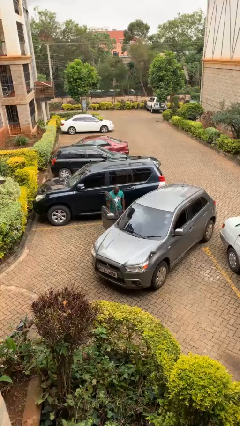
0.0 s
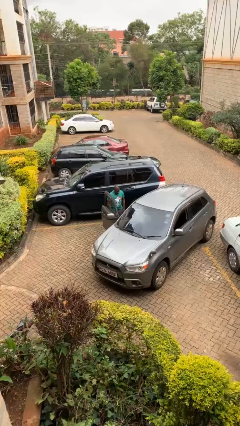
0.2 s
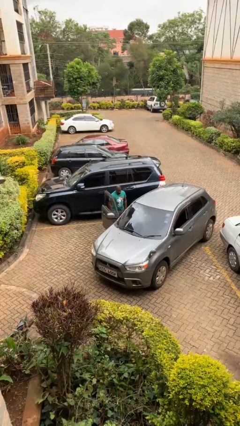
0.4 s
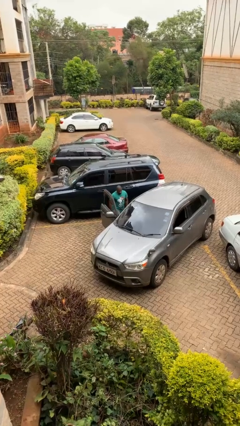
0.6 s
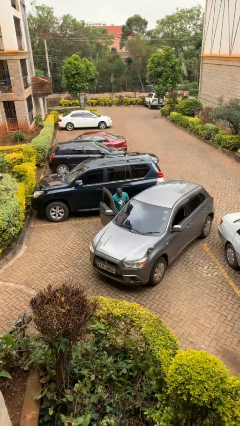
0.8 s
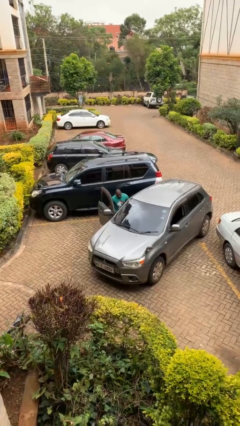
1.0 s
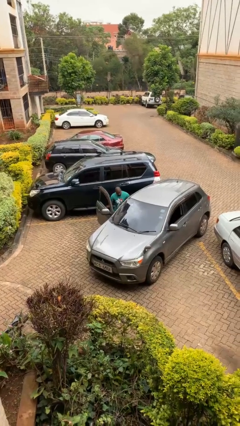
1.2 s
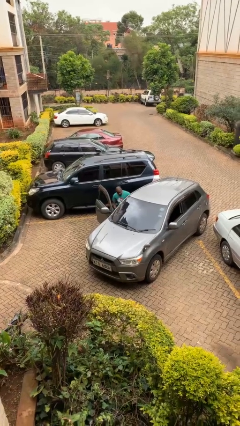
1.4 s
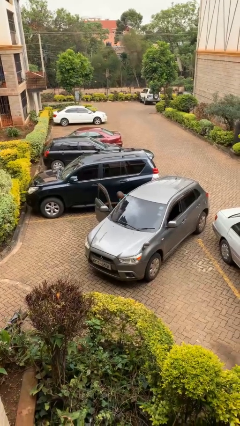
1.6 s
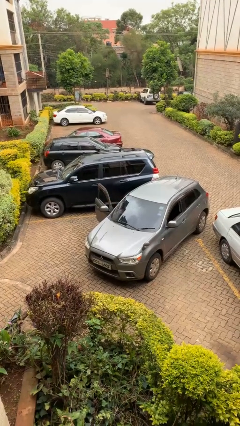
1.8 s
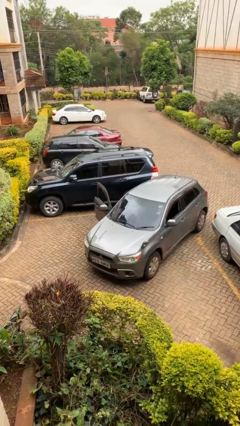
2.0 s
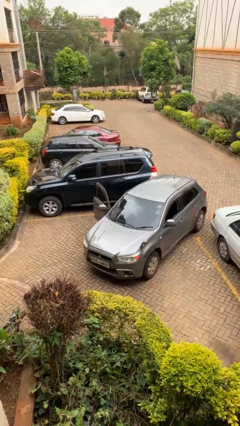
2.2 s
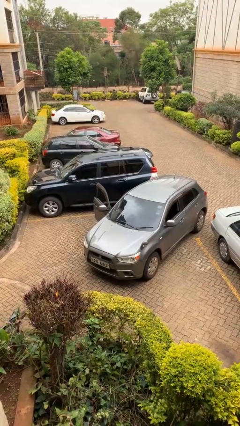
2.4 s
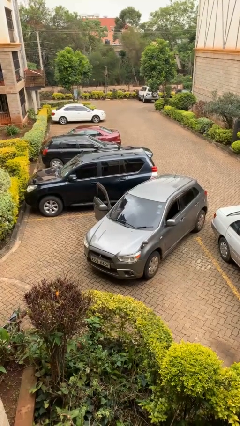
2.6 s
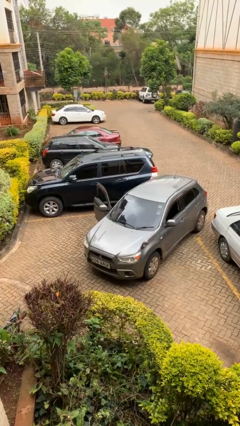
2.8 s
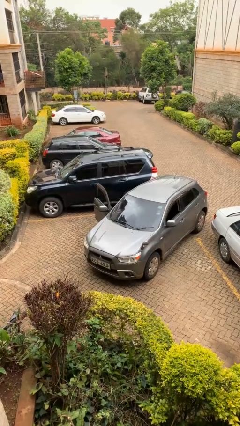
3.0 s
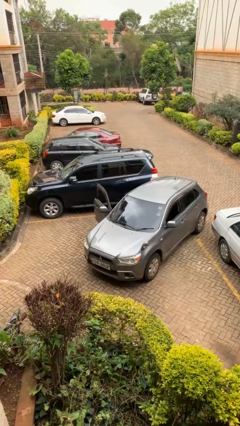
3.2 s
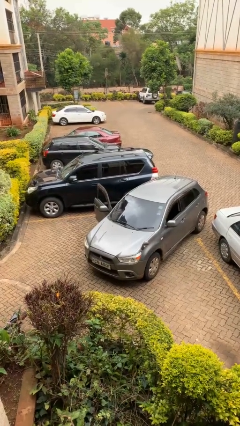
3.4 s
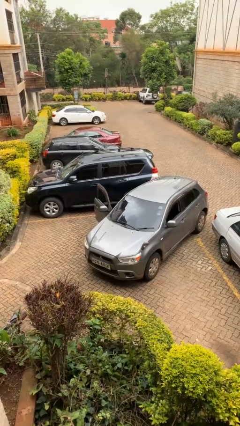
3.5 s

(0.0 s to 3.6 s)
person enters car

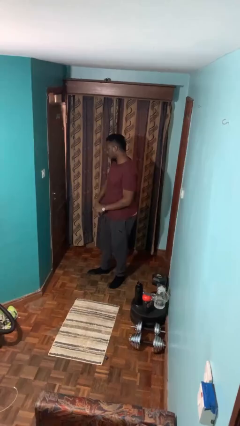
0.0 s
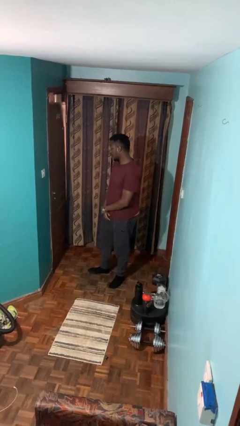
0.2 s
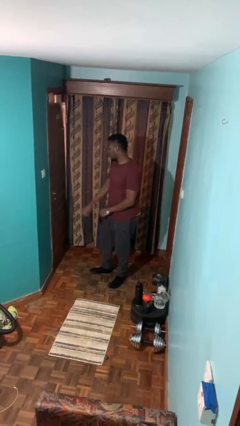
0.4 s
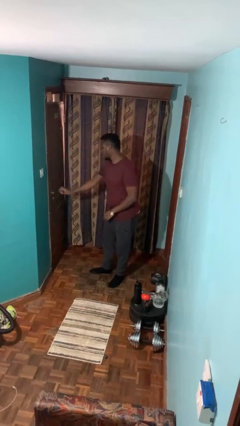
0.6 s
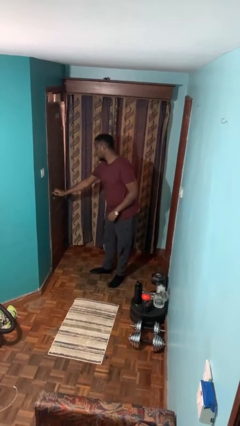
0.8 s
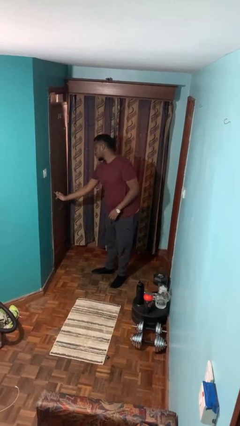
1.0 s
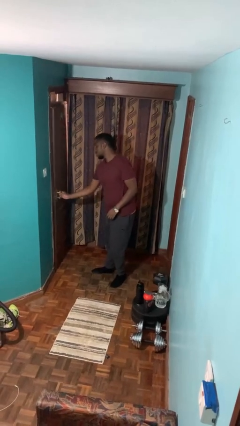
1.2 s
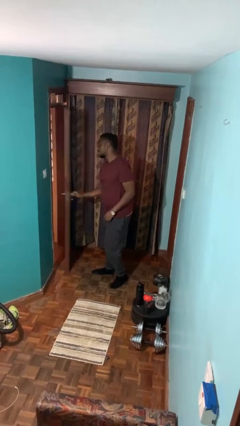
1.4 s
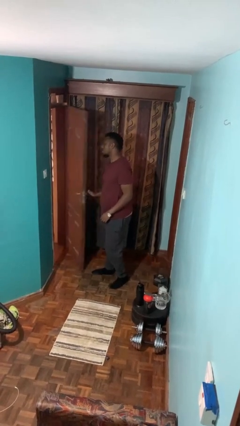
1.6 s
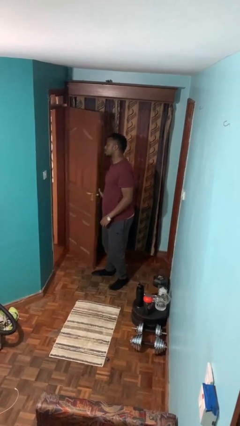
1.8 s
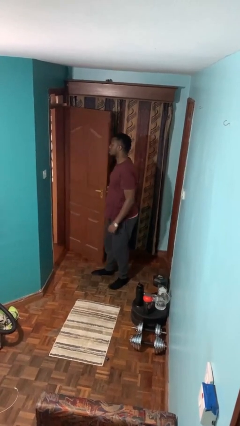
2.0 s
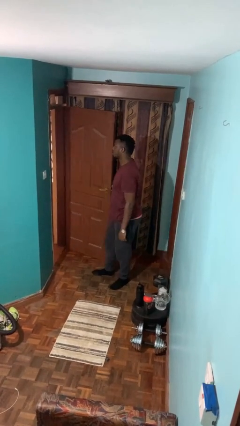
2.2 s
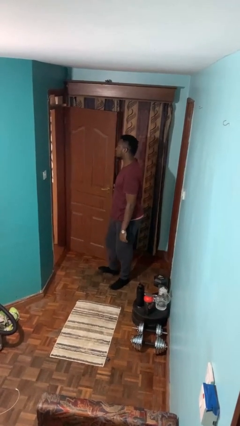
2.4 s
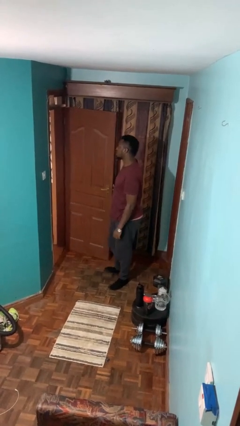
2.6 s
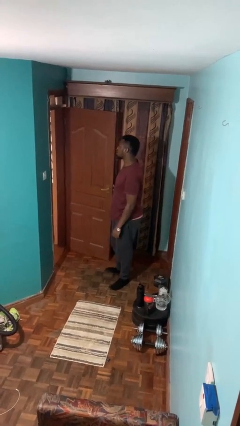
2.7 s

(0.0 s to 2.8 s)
person opens facility door

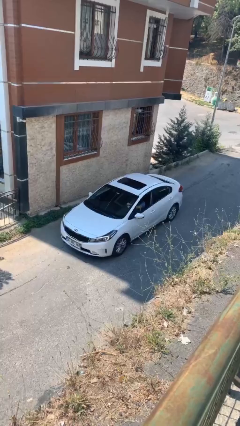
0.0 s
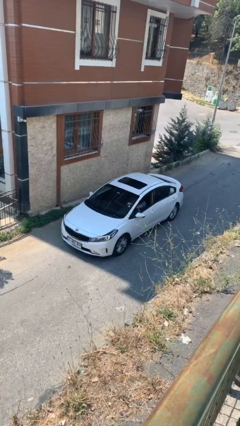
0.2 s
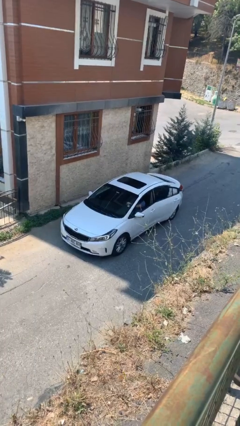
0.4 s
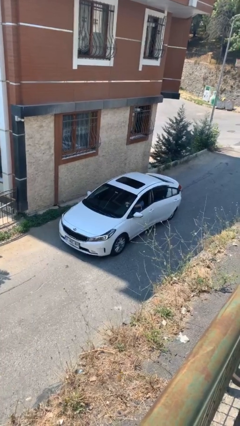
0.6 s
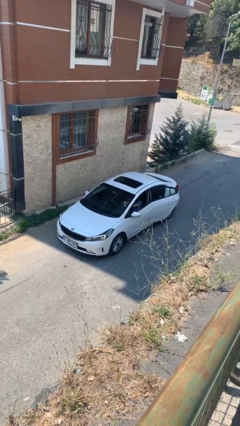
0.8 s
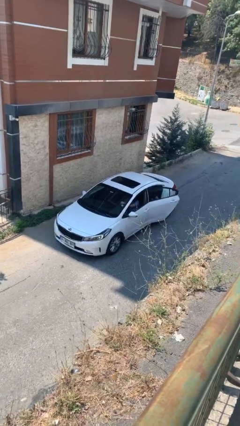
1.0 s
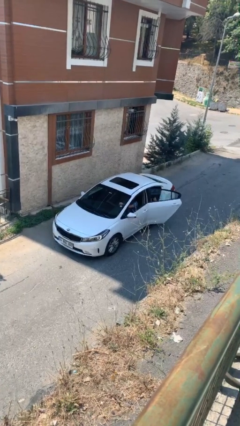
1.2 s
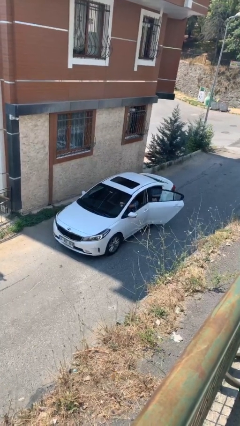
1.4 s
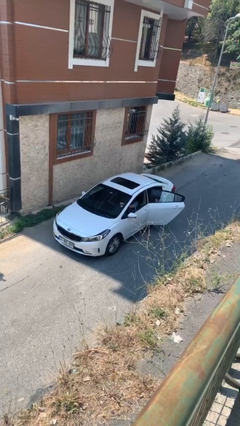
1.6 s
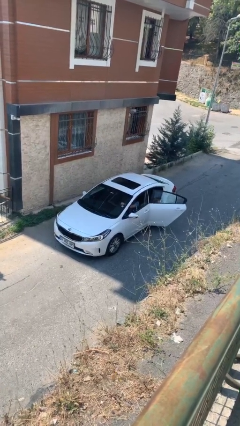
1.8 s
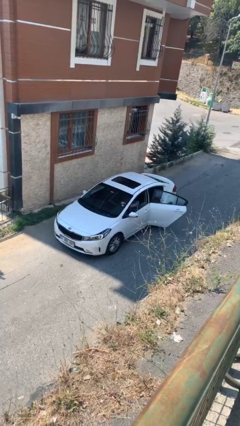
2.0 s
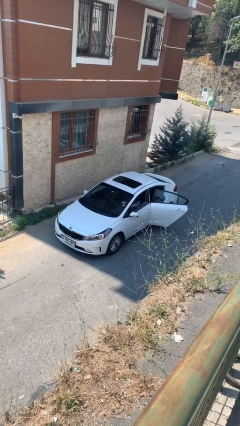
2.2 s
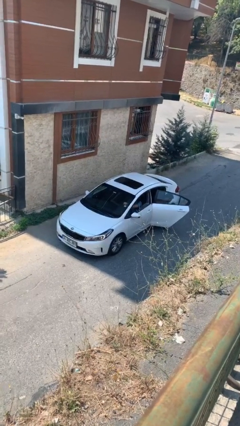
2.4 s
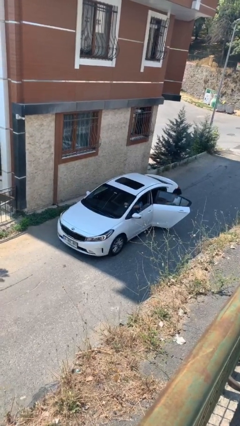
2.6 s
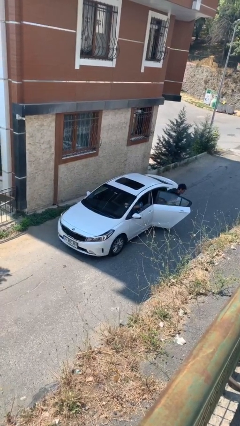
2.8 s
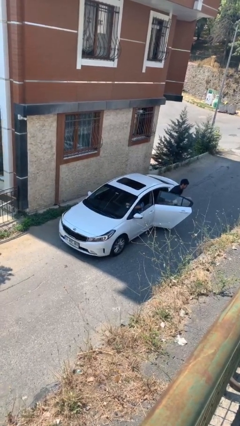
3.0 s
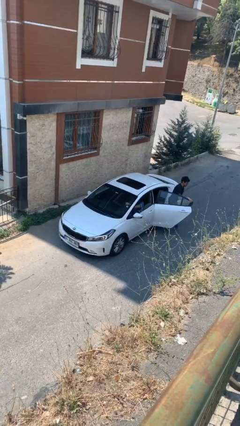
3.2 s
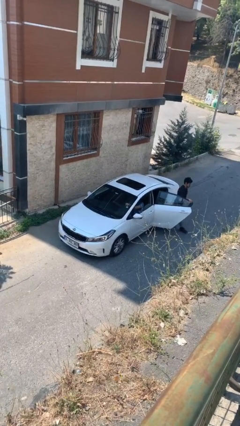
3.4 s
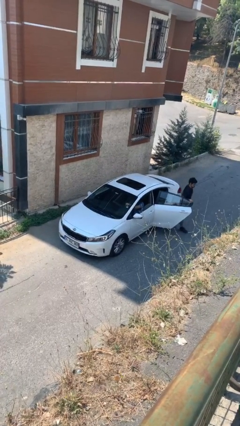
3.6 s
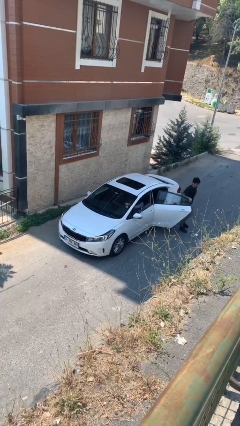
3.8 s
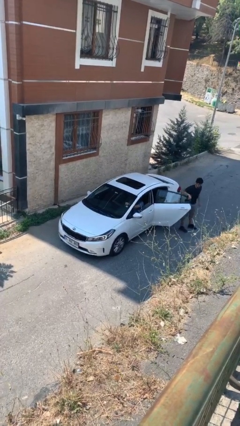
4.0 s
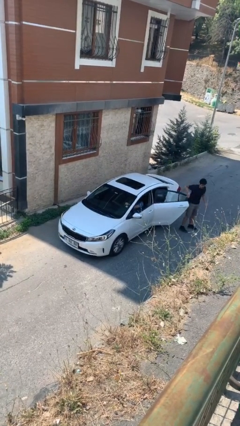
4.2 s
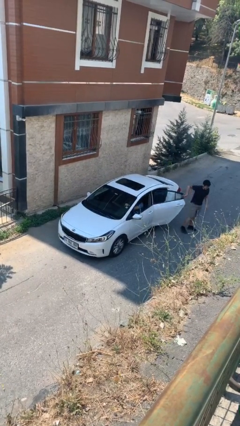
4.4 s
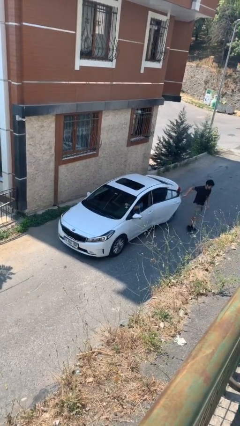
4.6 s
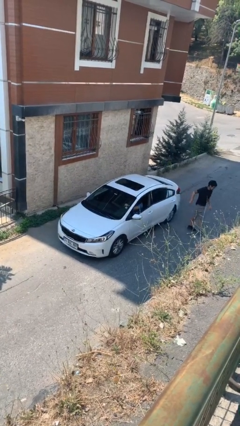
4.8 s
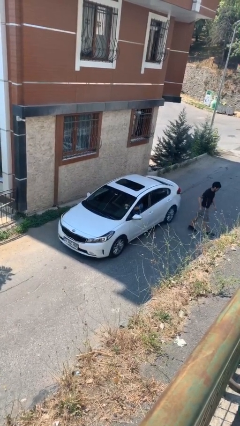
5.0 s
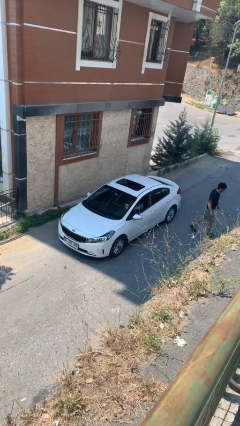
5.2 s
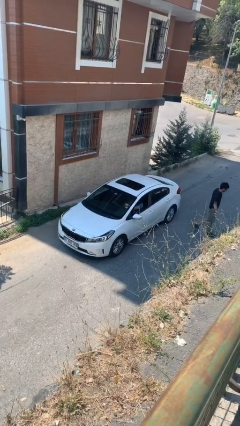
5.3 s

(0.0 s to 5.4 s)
car drops off person

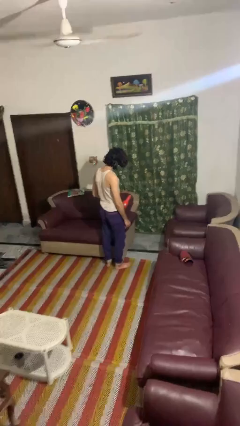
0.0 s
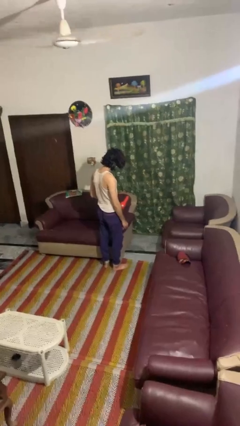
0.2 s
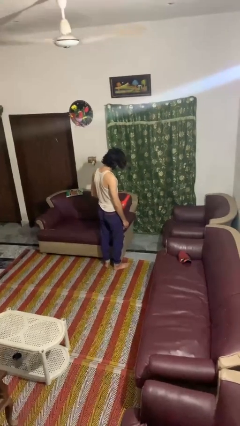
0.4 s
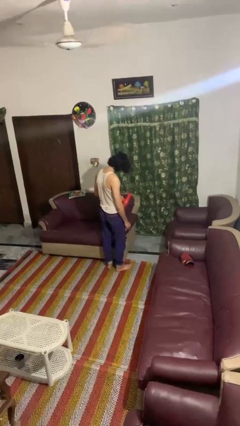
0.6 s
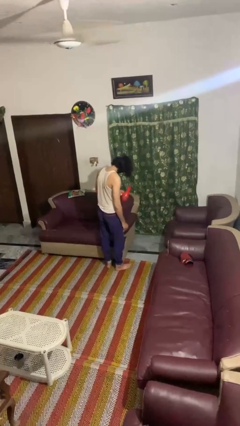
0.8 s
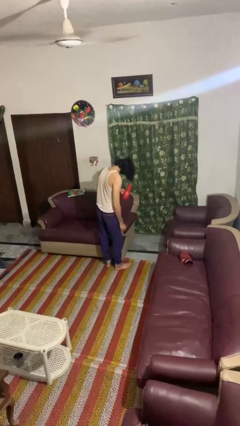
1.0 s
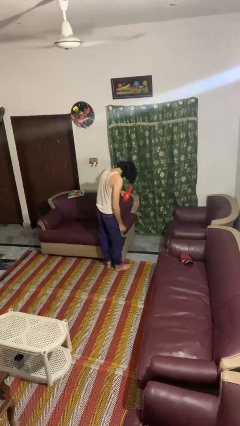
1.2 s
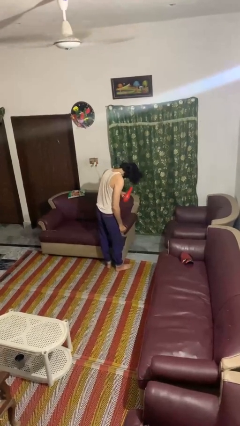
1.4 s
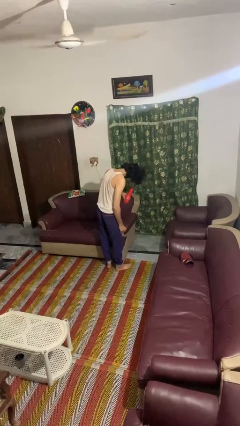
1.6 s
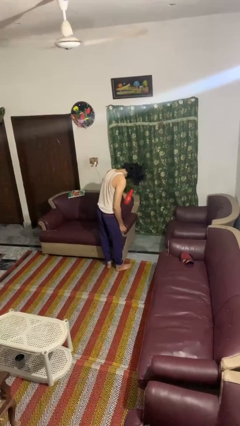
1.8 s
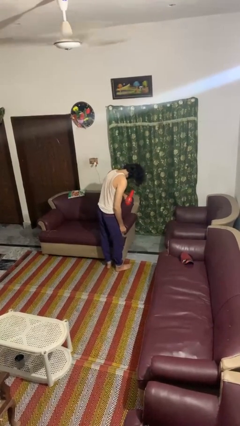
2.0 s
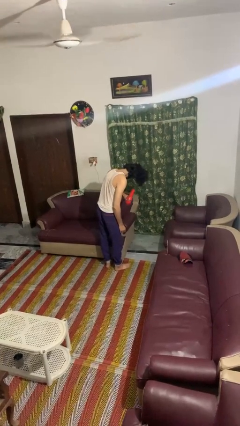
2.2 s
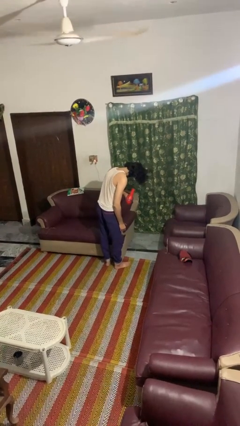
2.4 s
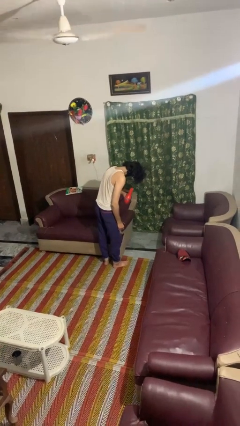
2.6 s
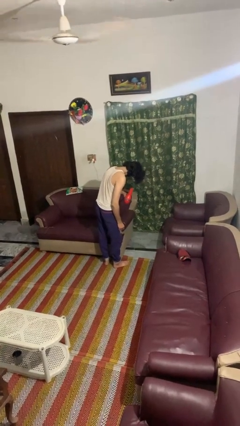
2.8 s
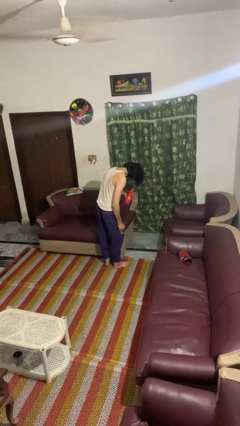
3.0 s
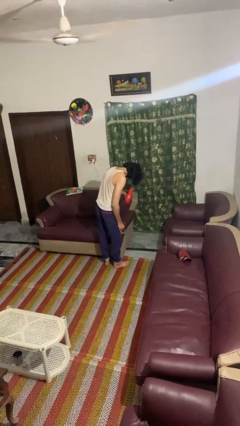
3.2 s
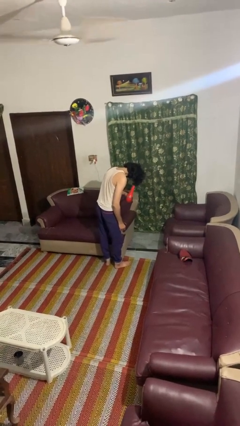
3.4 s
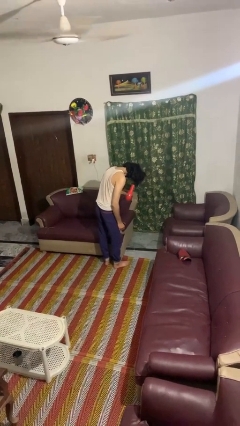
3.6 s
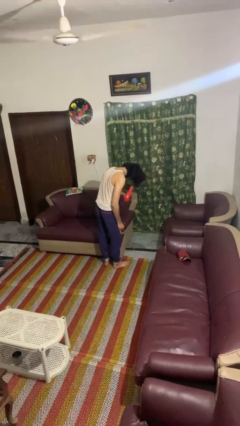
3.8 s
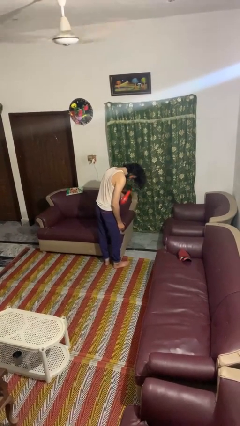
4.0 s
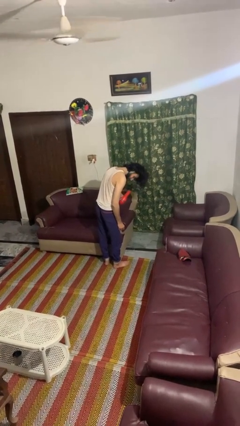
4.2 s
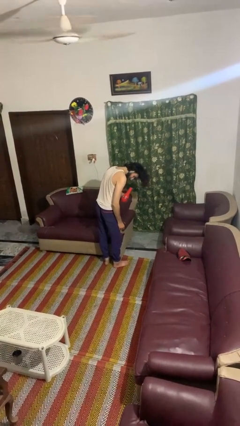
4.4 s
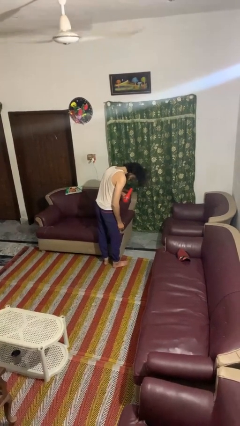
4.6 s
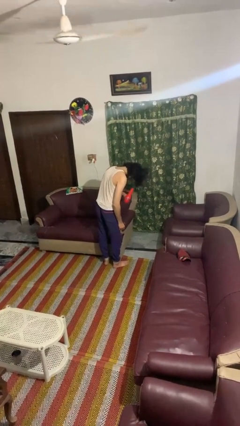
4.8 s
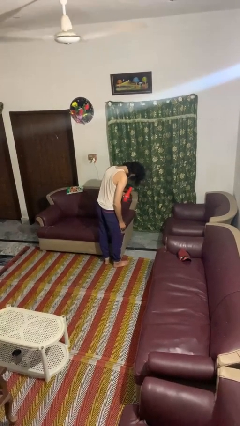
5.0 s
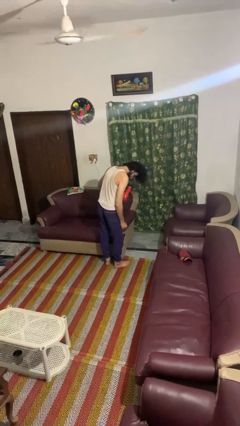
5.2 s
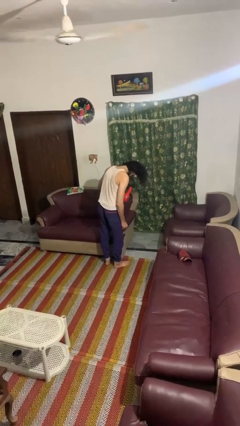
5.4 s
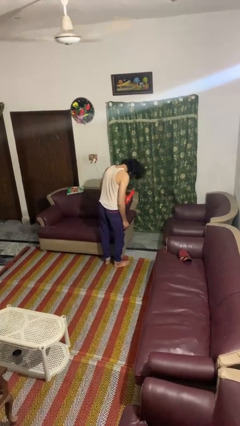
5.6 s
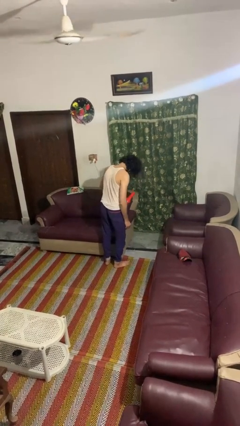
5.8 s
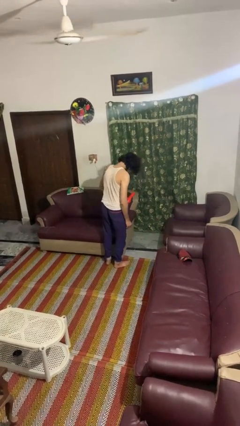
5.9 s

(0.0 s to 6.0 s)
person dries hair with hairdryer
